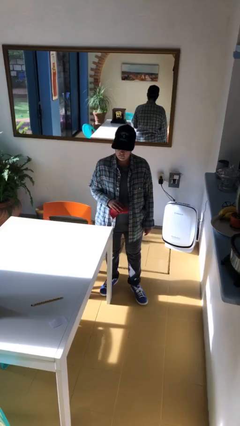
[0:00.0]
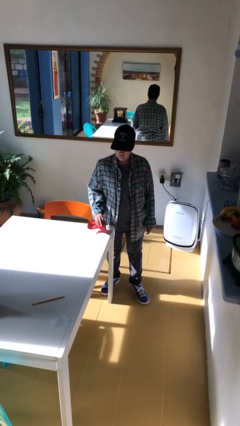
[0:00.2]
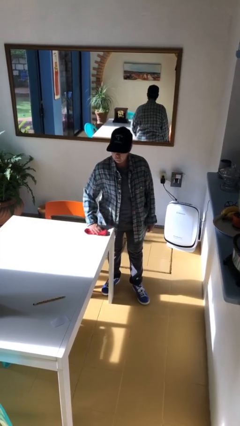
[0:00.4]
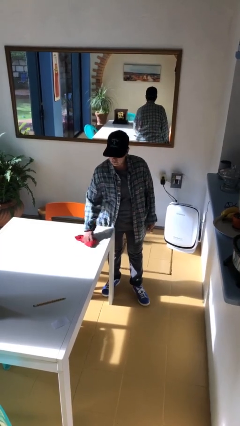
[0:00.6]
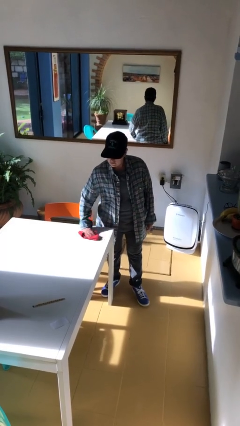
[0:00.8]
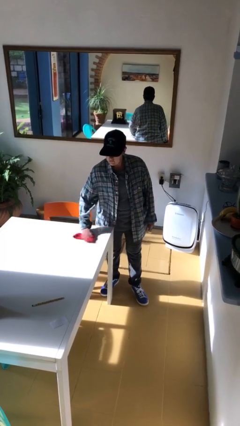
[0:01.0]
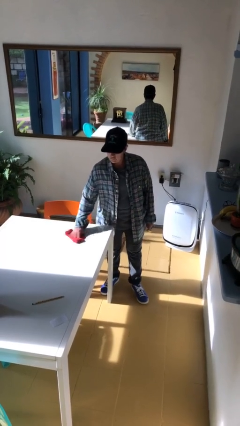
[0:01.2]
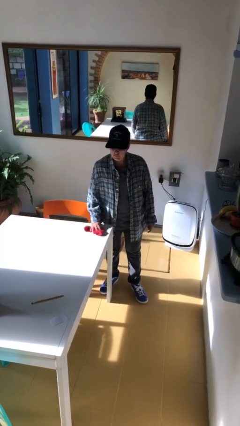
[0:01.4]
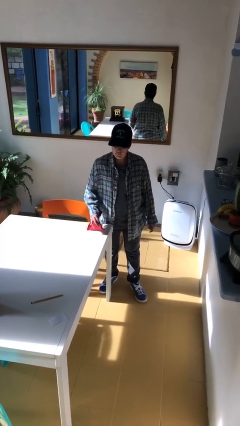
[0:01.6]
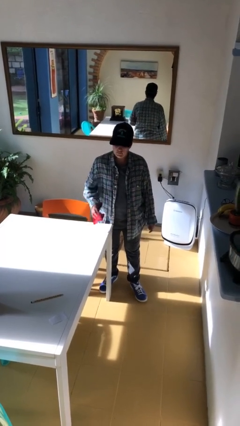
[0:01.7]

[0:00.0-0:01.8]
person cleans table with rag

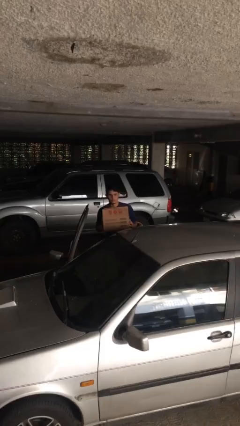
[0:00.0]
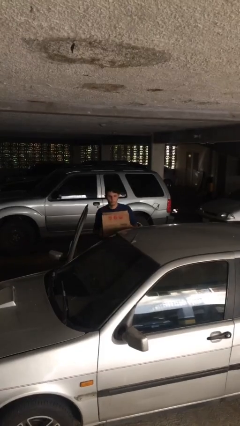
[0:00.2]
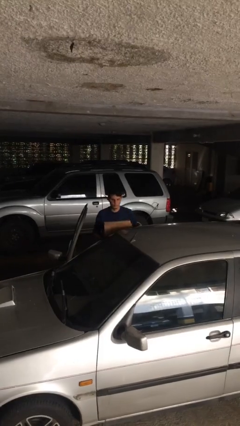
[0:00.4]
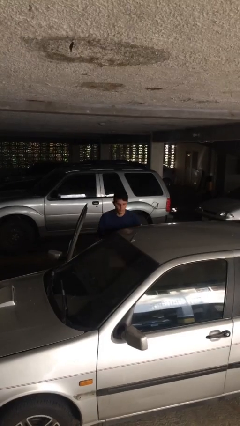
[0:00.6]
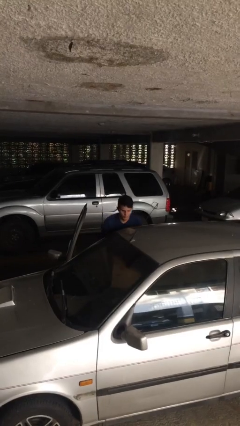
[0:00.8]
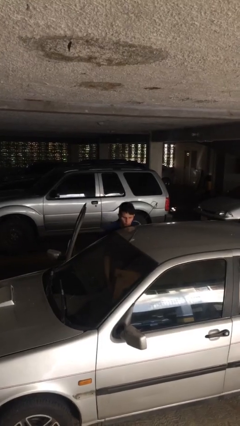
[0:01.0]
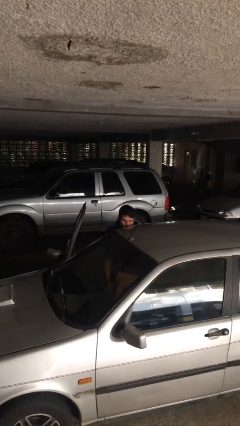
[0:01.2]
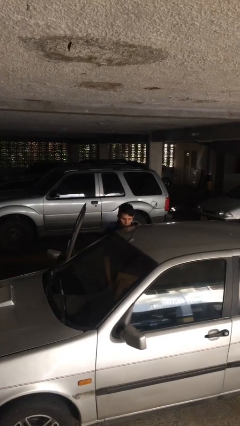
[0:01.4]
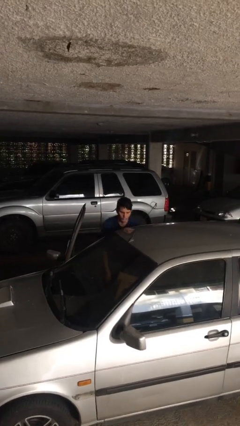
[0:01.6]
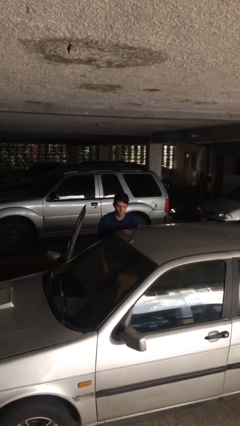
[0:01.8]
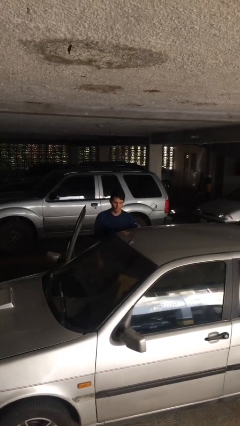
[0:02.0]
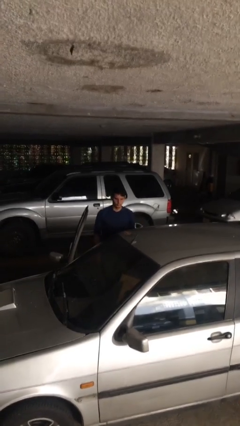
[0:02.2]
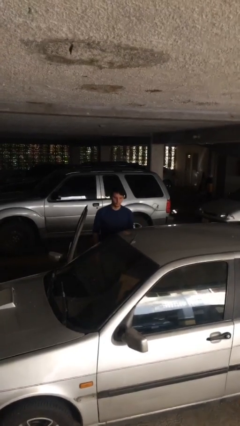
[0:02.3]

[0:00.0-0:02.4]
person loads car

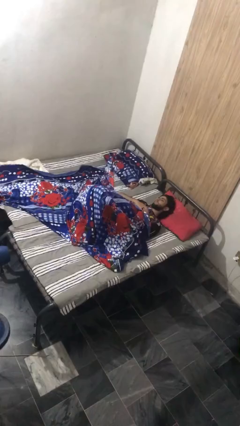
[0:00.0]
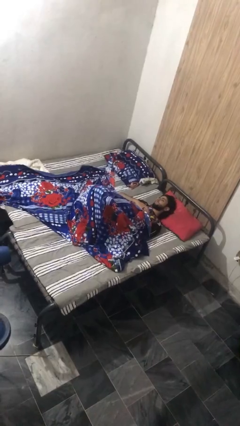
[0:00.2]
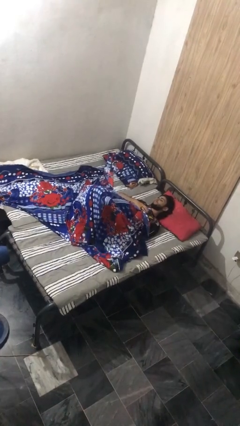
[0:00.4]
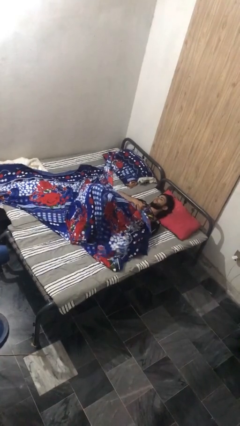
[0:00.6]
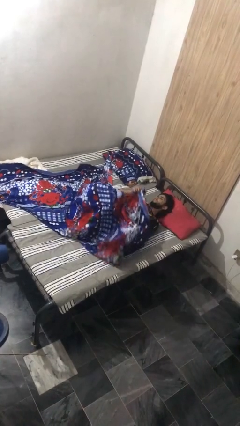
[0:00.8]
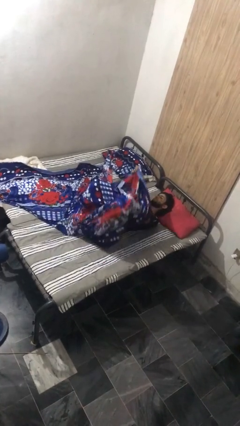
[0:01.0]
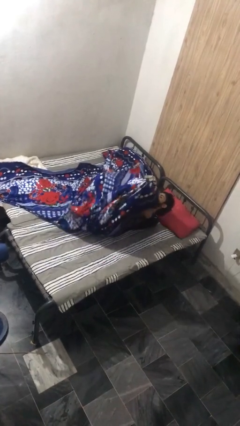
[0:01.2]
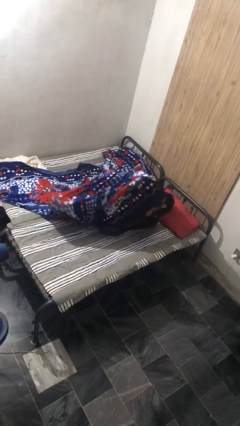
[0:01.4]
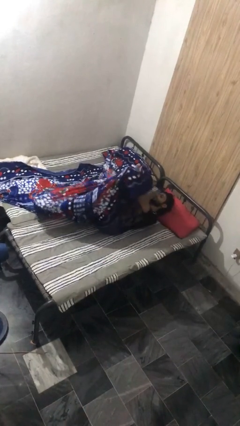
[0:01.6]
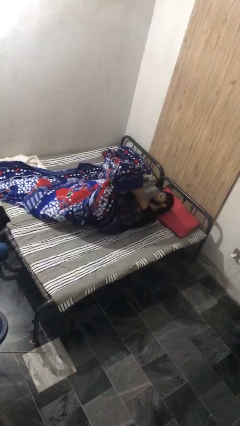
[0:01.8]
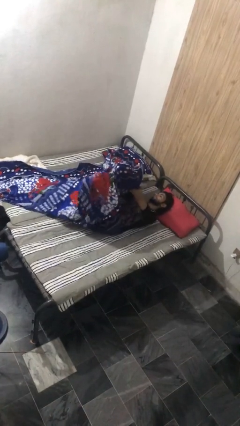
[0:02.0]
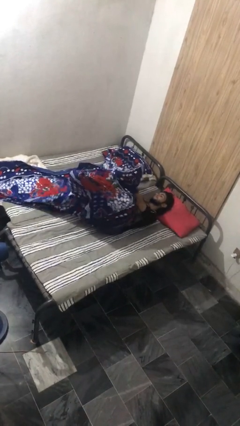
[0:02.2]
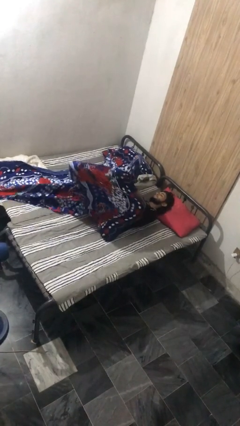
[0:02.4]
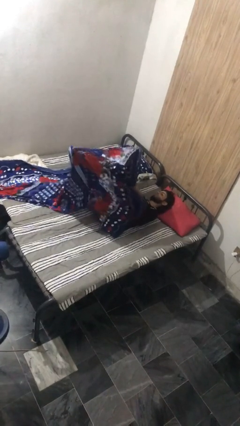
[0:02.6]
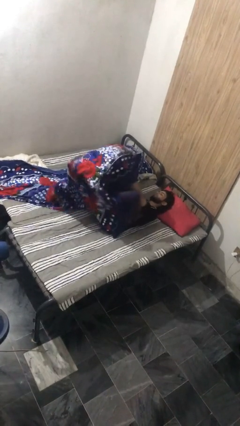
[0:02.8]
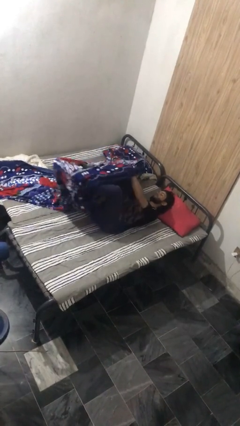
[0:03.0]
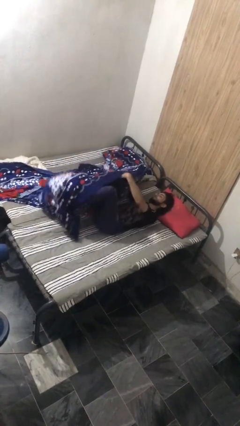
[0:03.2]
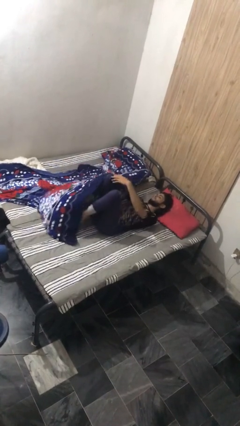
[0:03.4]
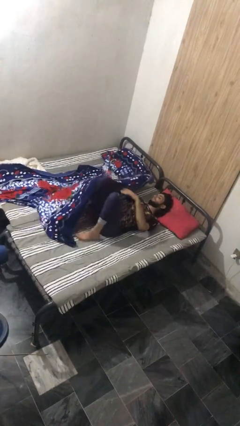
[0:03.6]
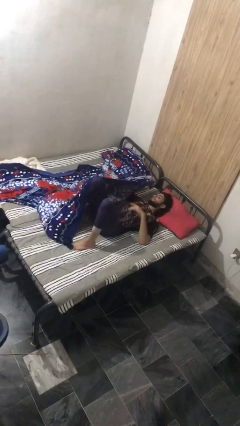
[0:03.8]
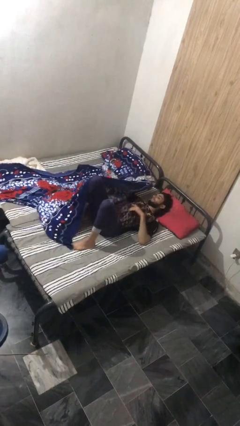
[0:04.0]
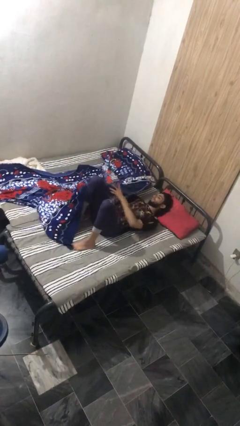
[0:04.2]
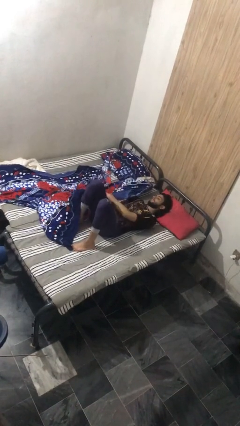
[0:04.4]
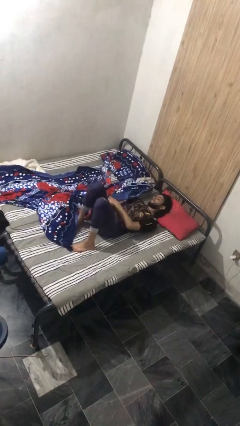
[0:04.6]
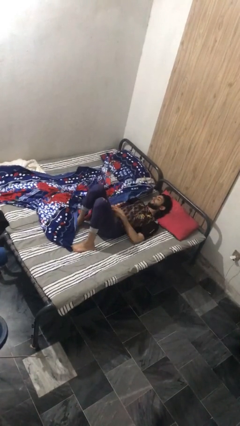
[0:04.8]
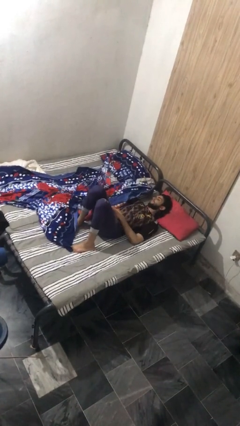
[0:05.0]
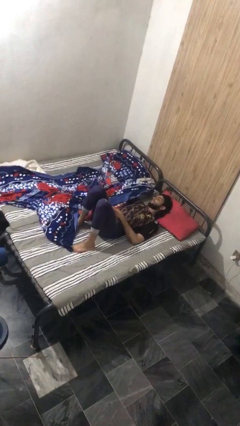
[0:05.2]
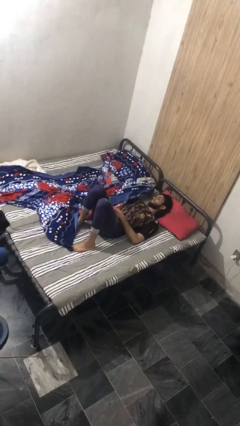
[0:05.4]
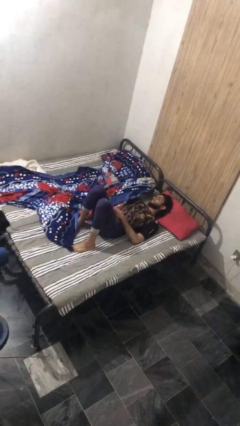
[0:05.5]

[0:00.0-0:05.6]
person uncovers with bedsheets

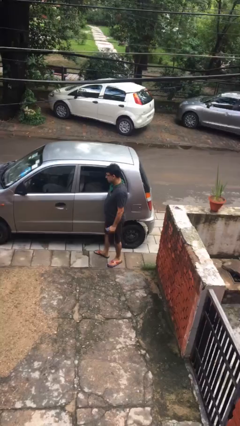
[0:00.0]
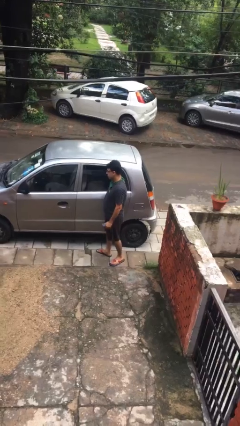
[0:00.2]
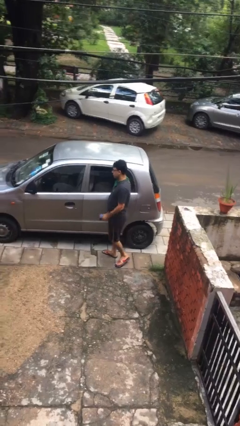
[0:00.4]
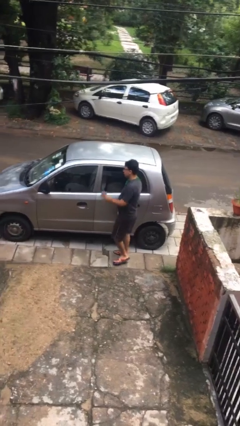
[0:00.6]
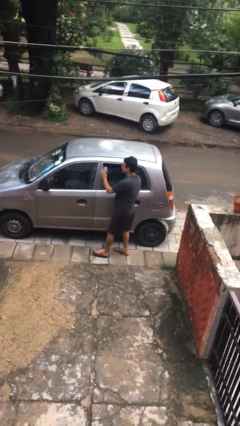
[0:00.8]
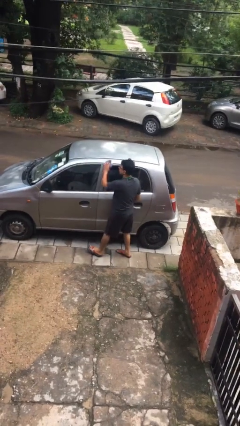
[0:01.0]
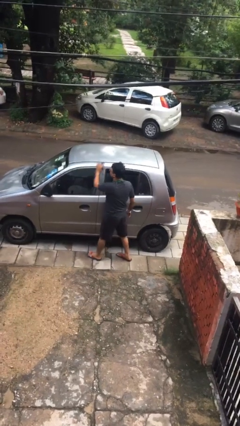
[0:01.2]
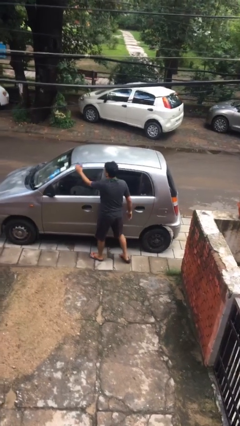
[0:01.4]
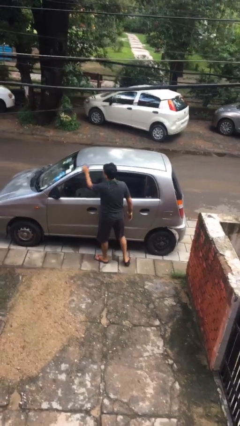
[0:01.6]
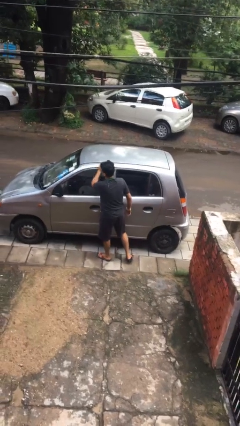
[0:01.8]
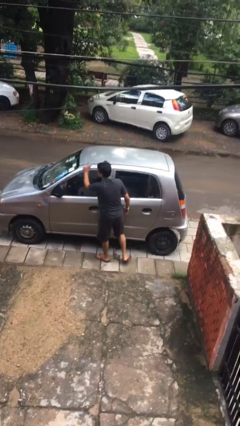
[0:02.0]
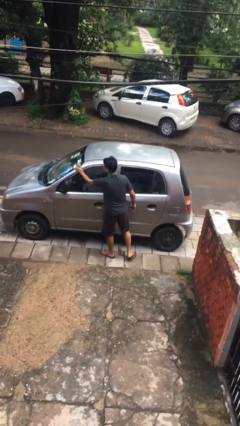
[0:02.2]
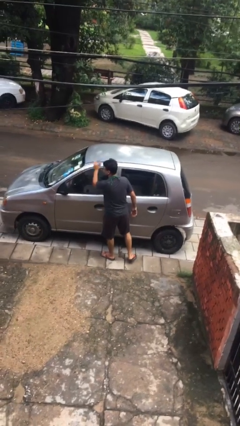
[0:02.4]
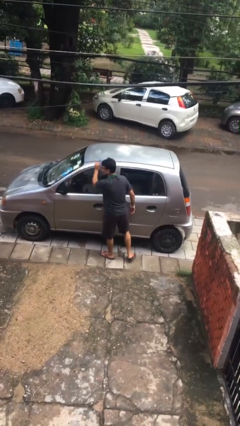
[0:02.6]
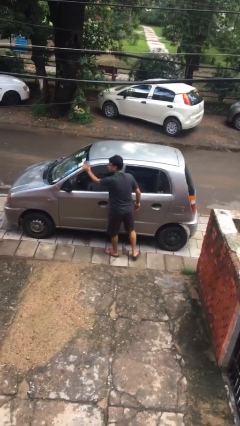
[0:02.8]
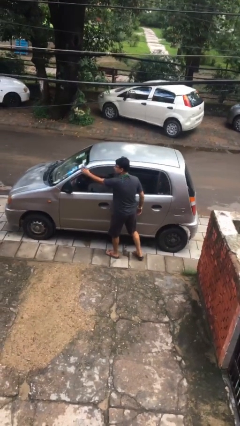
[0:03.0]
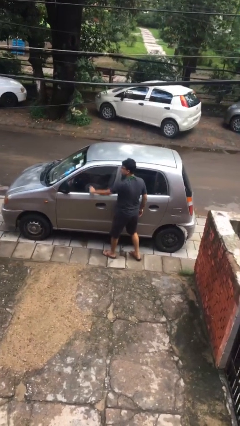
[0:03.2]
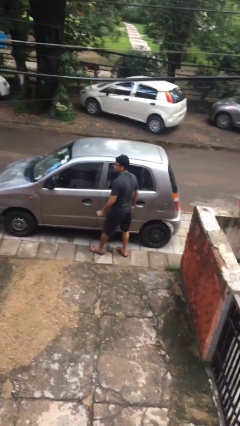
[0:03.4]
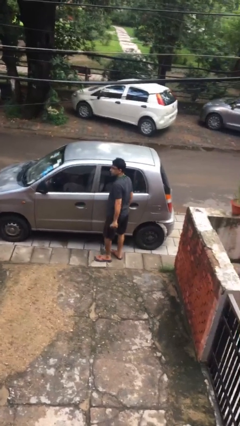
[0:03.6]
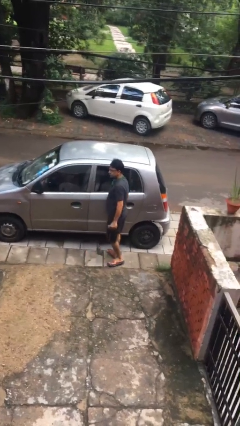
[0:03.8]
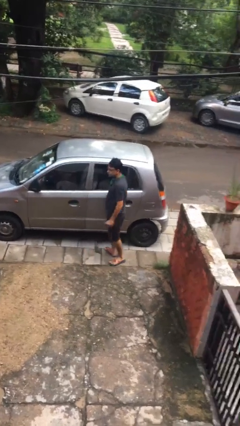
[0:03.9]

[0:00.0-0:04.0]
person polishes car with rag

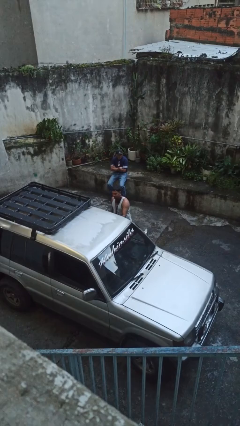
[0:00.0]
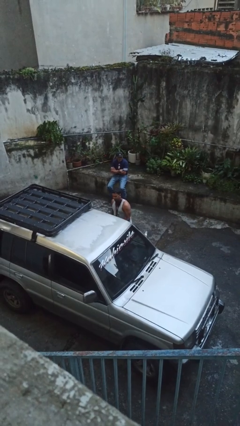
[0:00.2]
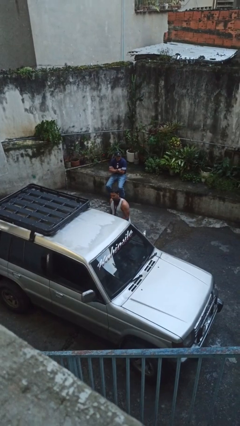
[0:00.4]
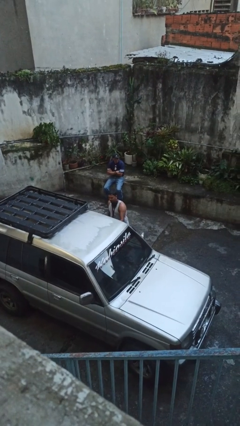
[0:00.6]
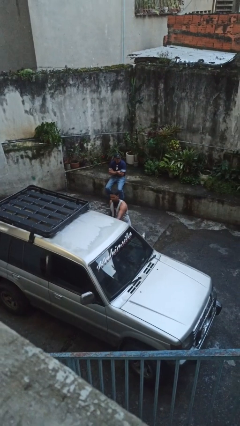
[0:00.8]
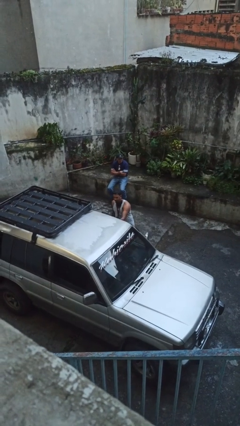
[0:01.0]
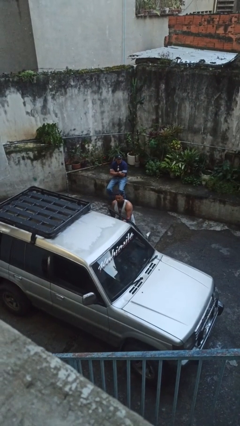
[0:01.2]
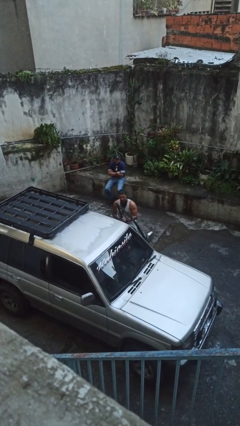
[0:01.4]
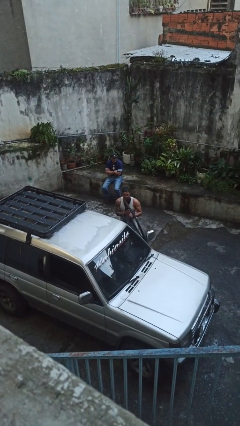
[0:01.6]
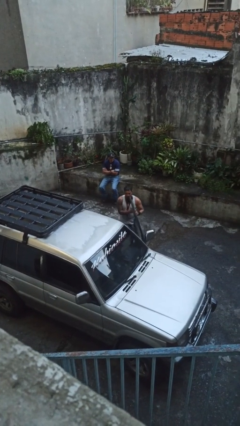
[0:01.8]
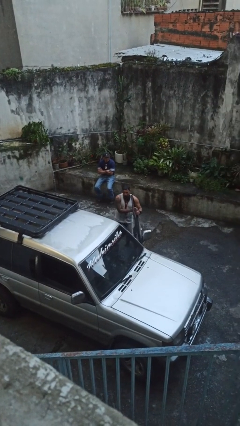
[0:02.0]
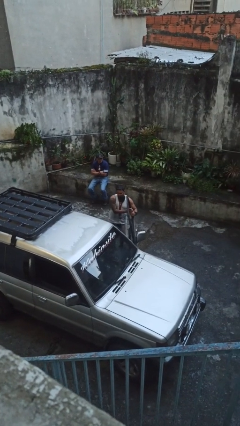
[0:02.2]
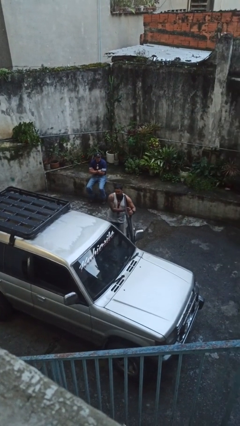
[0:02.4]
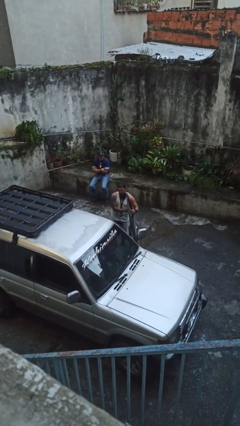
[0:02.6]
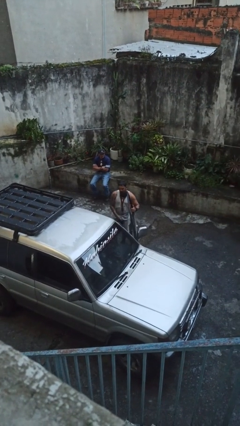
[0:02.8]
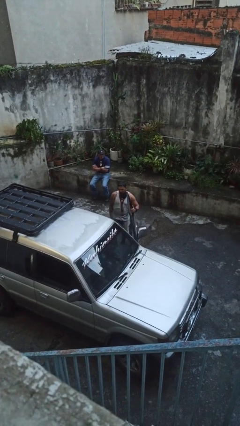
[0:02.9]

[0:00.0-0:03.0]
person opens car door

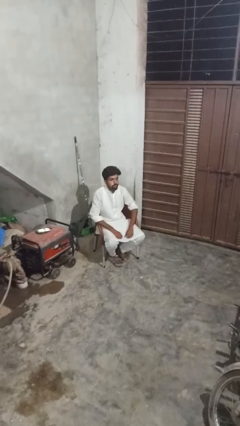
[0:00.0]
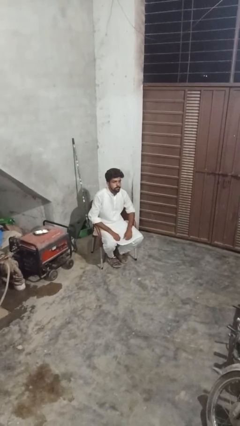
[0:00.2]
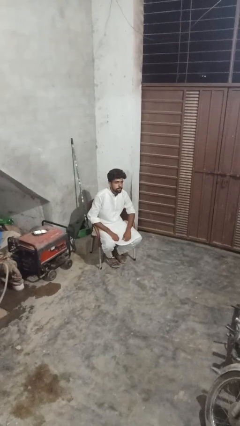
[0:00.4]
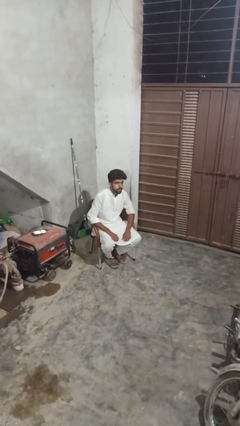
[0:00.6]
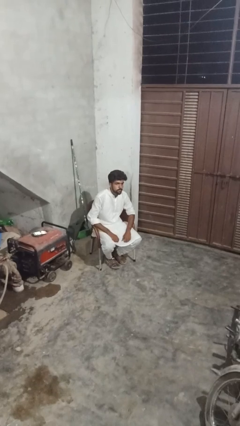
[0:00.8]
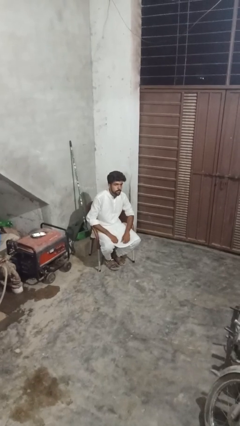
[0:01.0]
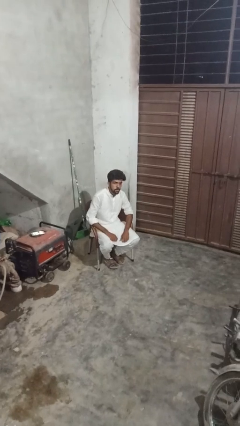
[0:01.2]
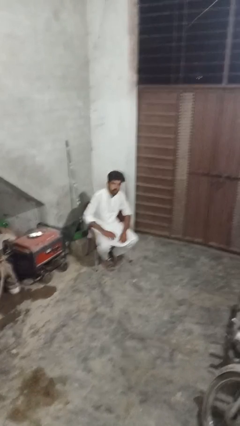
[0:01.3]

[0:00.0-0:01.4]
person gestures lower hand
